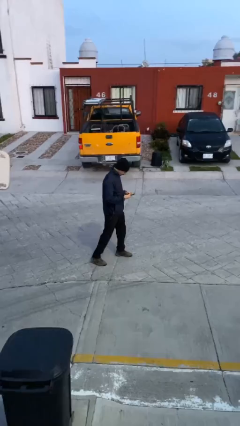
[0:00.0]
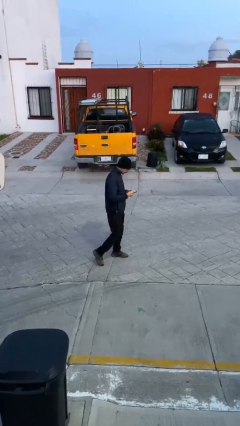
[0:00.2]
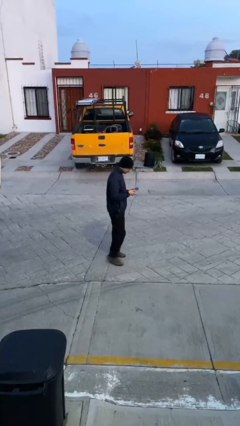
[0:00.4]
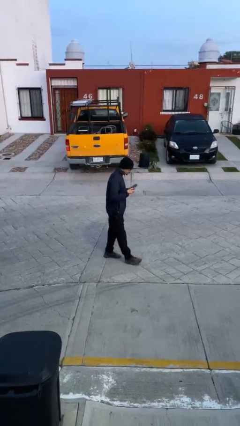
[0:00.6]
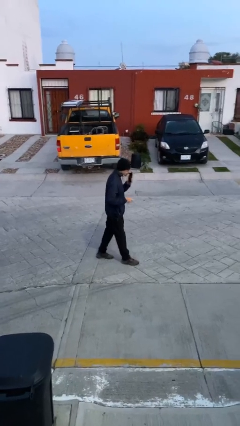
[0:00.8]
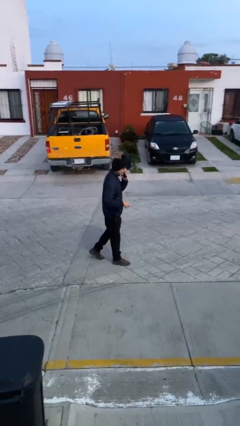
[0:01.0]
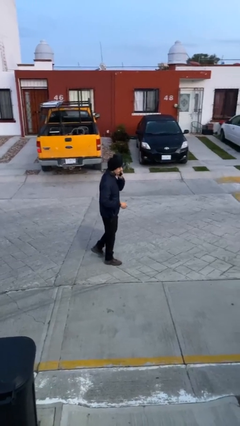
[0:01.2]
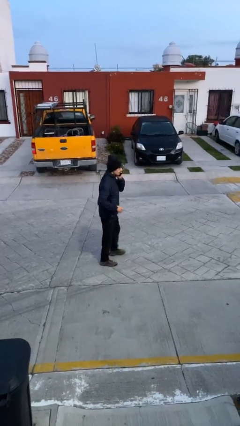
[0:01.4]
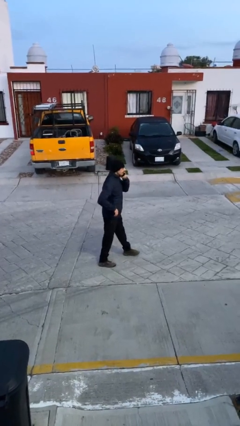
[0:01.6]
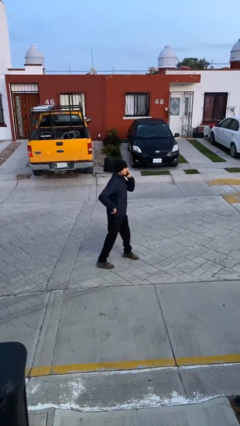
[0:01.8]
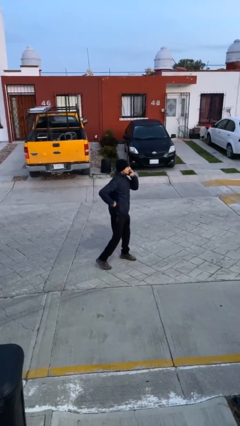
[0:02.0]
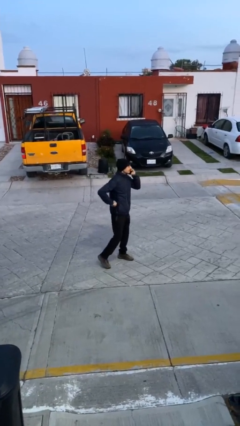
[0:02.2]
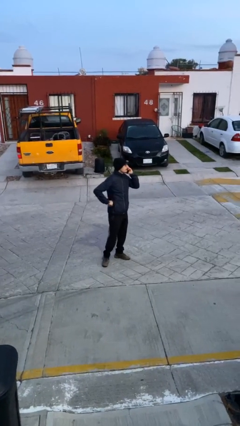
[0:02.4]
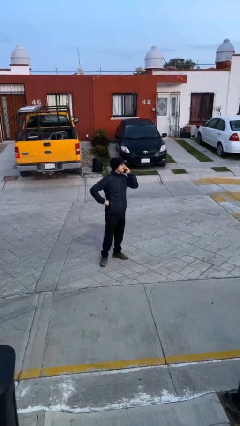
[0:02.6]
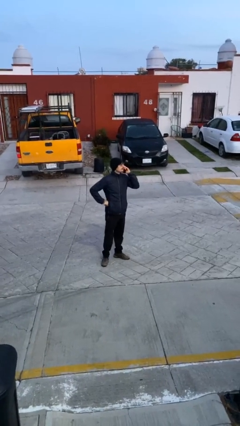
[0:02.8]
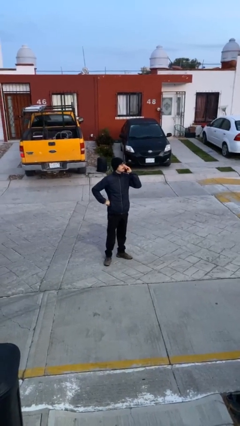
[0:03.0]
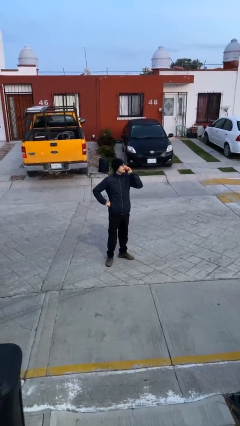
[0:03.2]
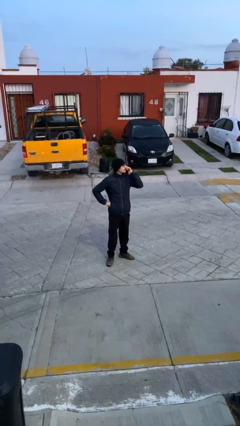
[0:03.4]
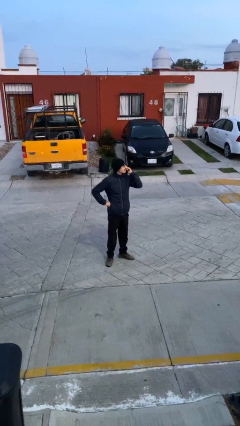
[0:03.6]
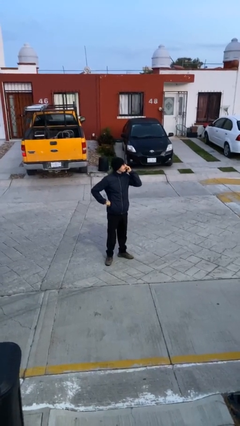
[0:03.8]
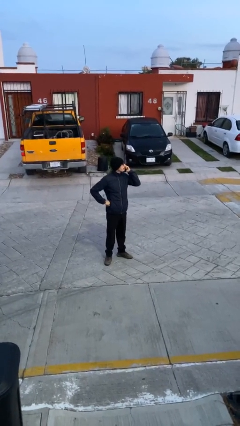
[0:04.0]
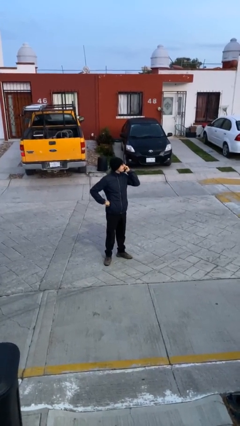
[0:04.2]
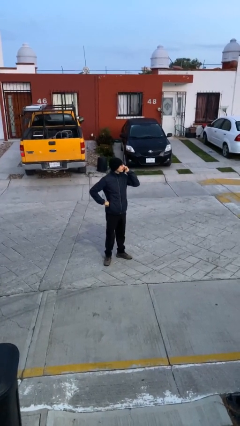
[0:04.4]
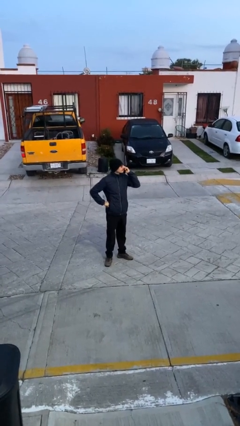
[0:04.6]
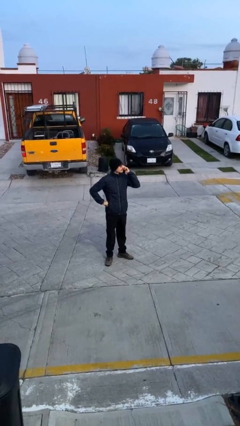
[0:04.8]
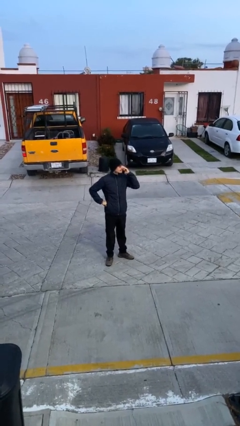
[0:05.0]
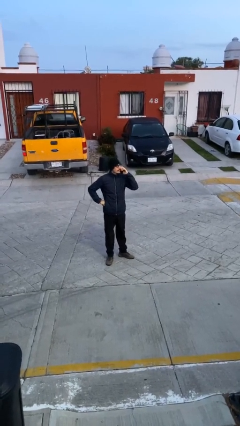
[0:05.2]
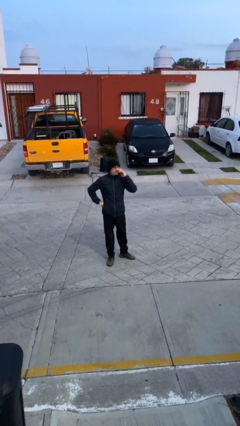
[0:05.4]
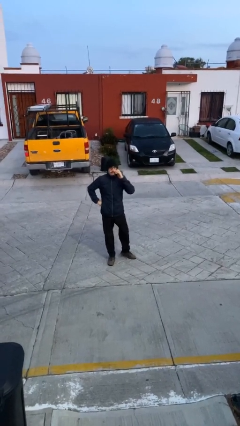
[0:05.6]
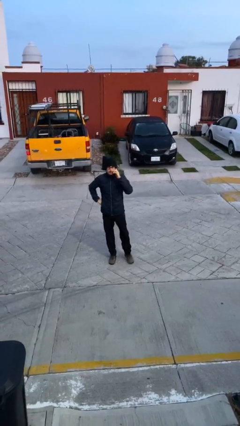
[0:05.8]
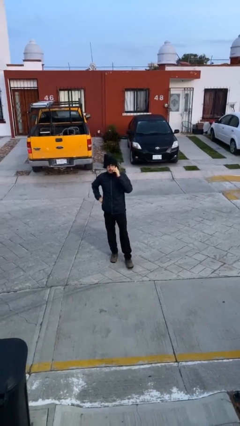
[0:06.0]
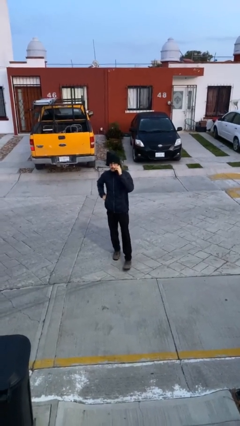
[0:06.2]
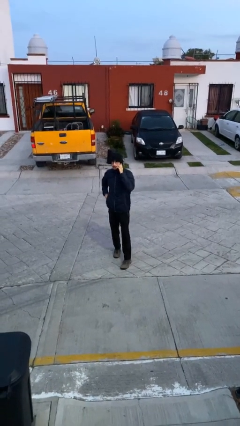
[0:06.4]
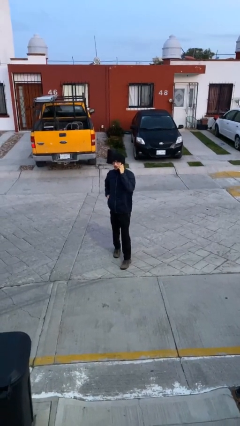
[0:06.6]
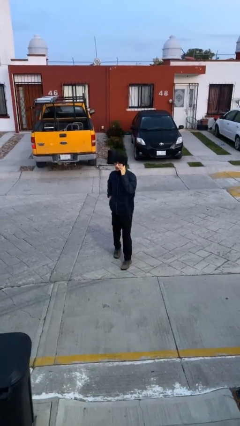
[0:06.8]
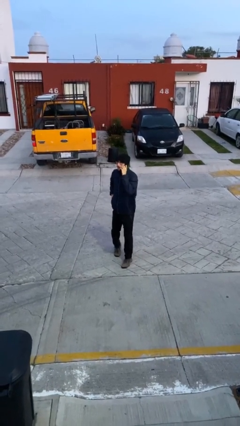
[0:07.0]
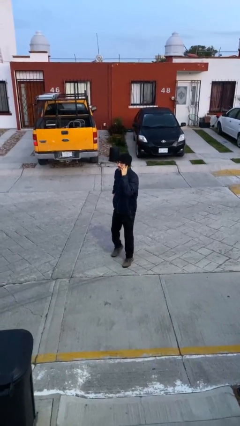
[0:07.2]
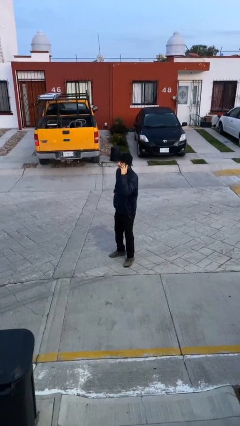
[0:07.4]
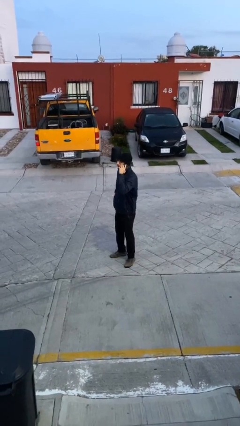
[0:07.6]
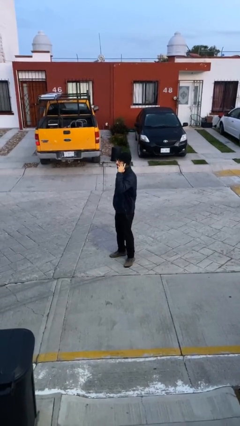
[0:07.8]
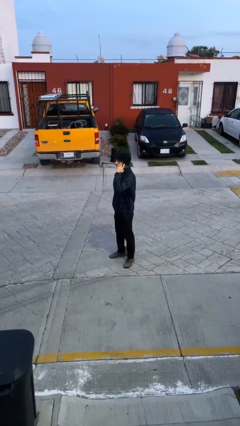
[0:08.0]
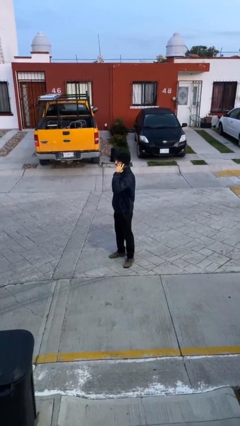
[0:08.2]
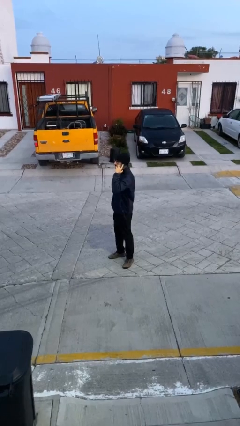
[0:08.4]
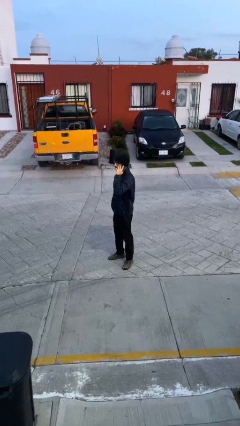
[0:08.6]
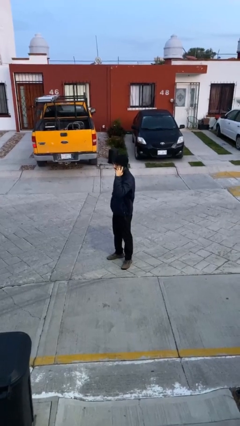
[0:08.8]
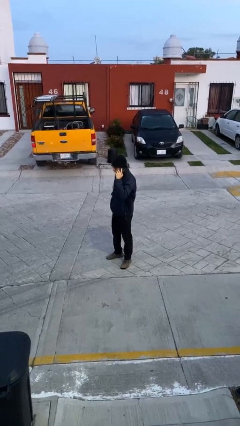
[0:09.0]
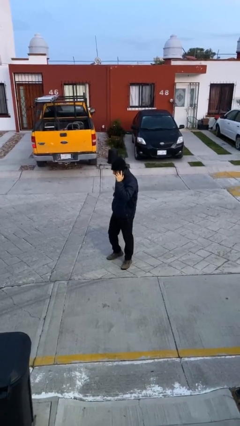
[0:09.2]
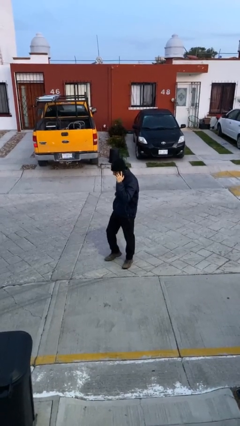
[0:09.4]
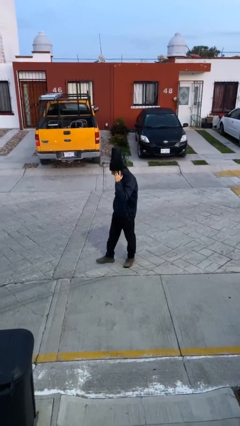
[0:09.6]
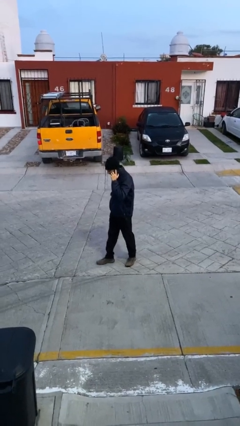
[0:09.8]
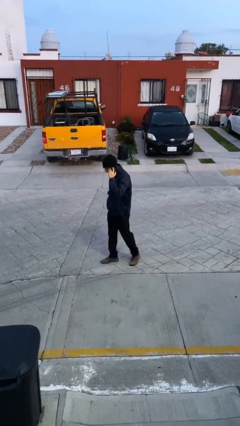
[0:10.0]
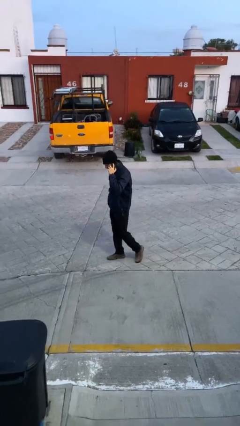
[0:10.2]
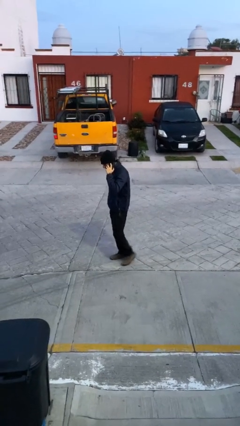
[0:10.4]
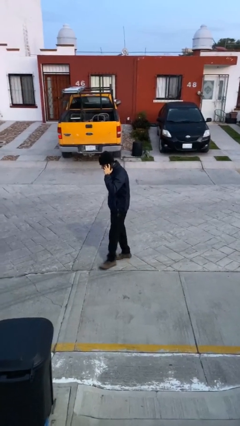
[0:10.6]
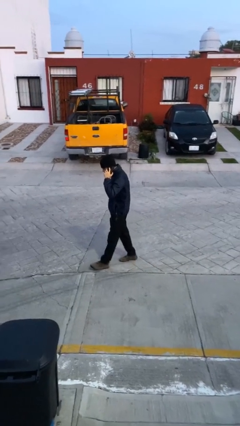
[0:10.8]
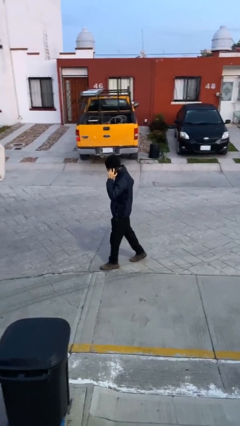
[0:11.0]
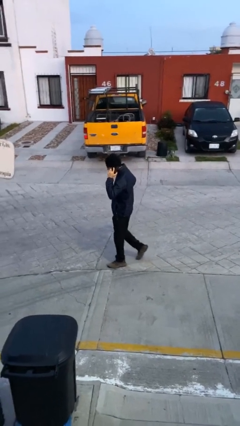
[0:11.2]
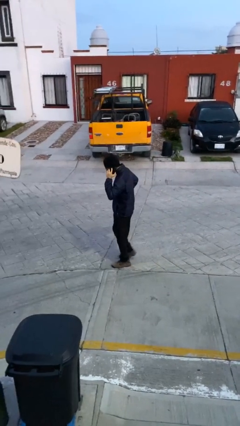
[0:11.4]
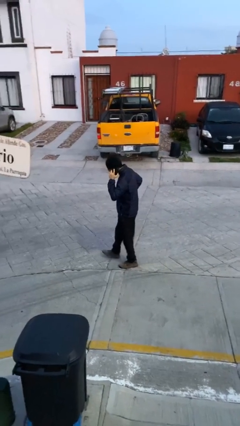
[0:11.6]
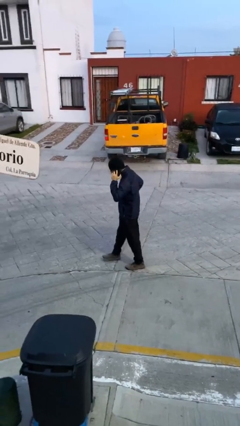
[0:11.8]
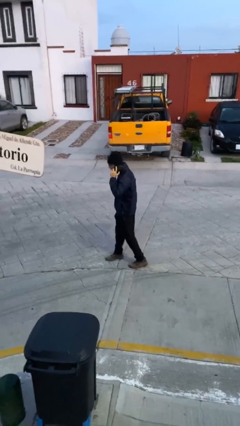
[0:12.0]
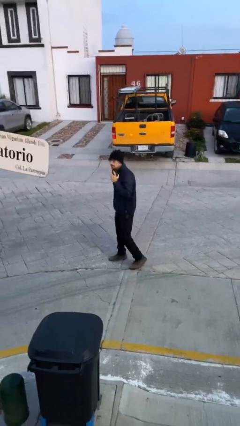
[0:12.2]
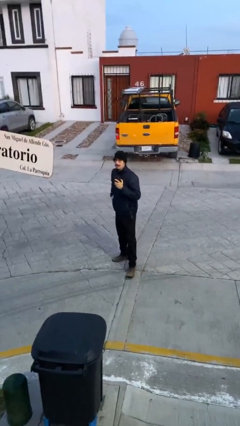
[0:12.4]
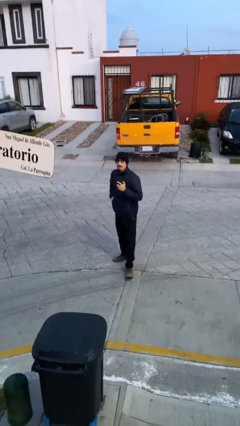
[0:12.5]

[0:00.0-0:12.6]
person talks on phone

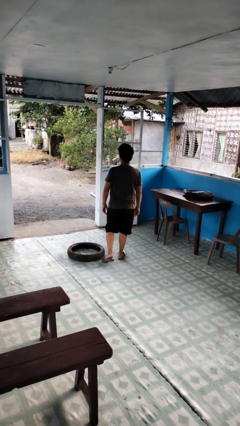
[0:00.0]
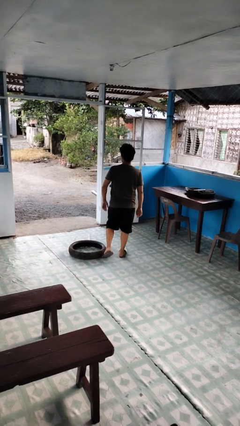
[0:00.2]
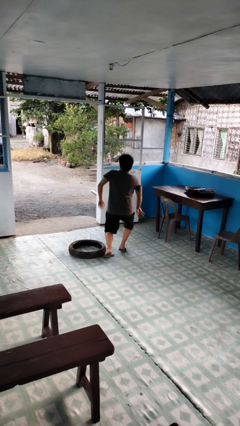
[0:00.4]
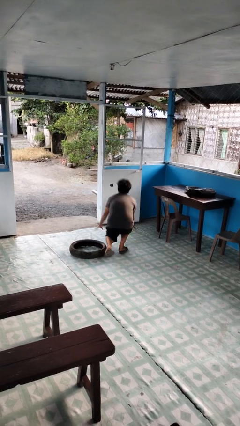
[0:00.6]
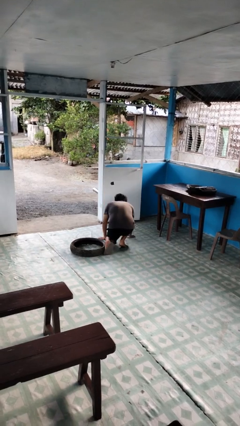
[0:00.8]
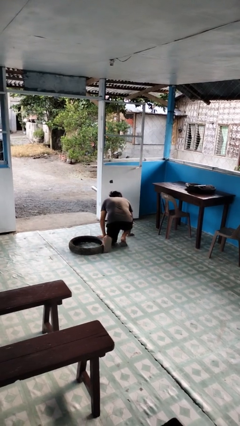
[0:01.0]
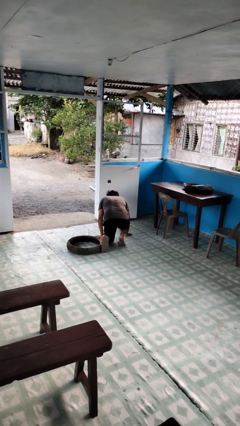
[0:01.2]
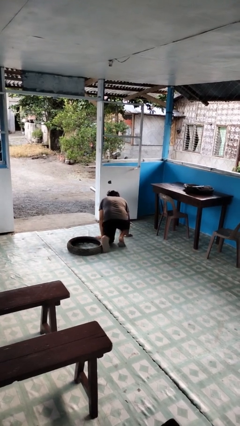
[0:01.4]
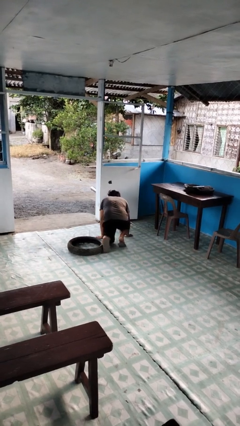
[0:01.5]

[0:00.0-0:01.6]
person trips on object on floor

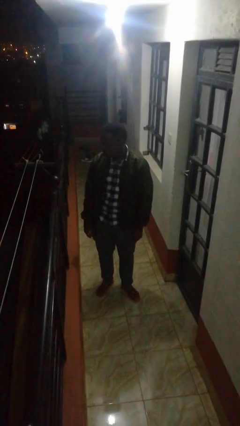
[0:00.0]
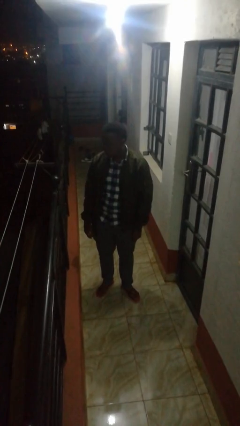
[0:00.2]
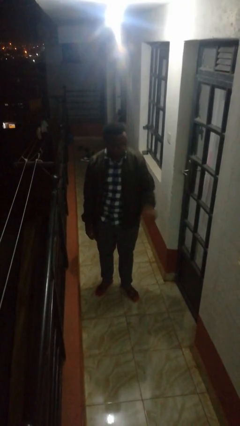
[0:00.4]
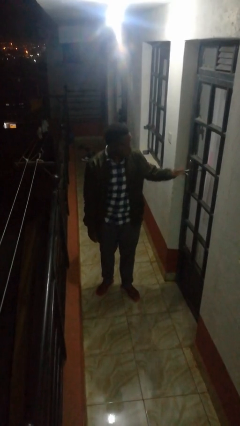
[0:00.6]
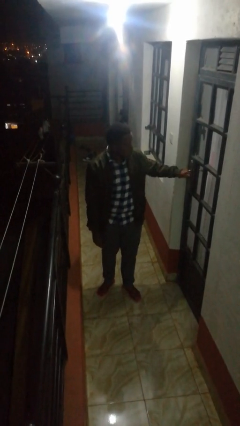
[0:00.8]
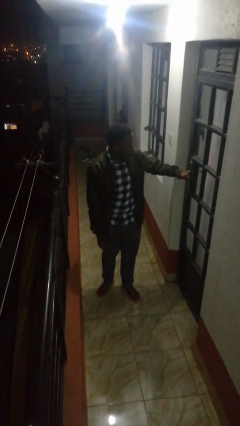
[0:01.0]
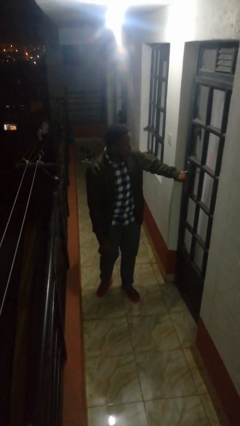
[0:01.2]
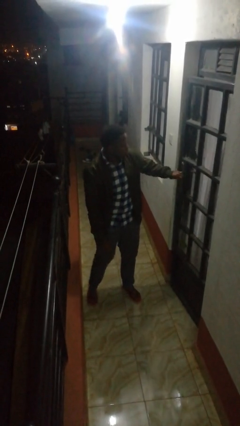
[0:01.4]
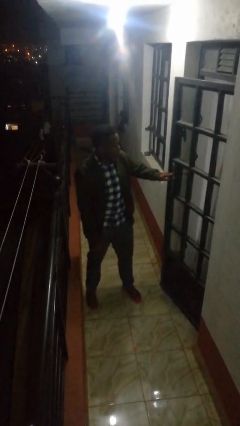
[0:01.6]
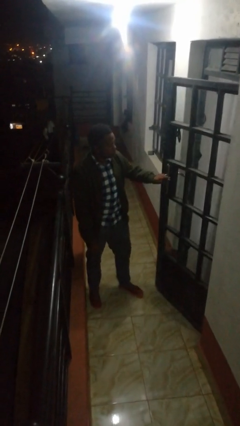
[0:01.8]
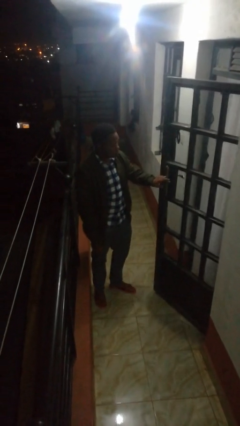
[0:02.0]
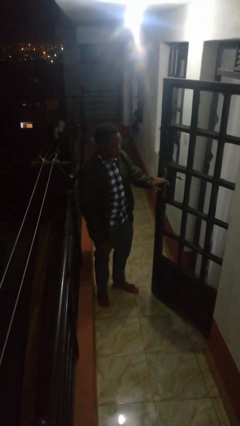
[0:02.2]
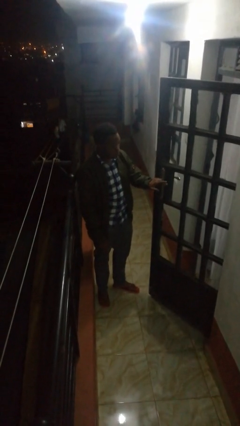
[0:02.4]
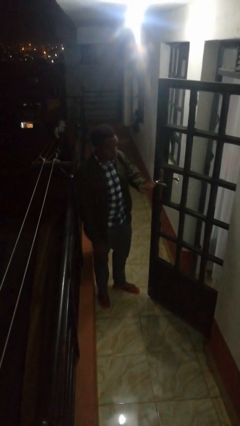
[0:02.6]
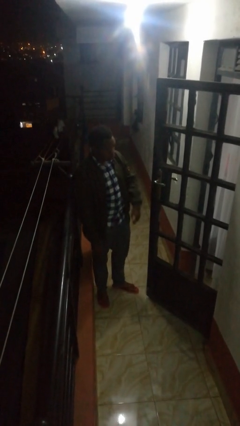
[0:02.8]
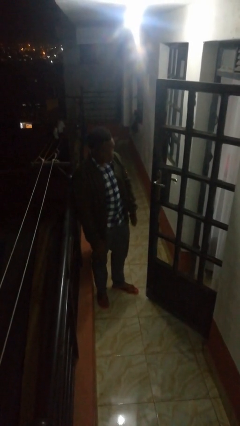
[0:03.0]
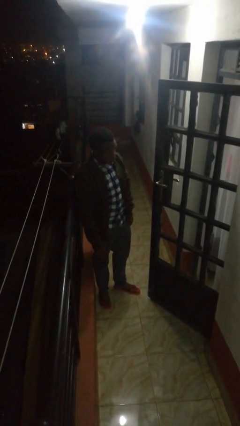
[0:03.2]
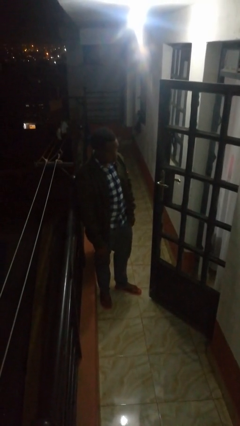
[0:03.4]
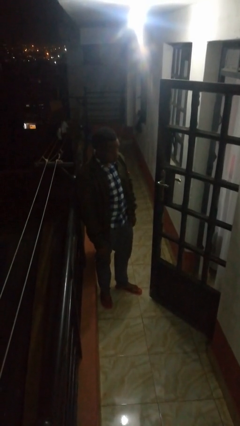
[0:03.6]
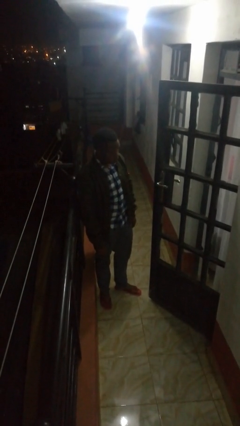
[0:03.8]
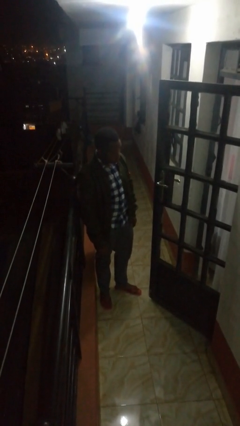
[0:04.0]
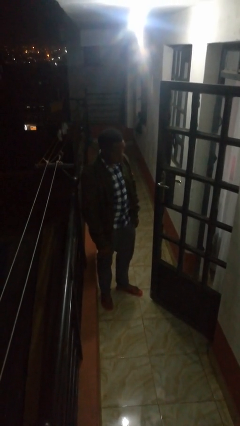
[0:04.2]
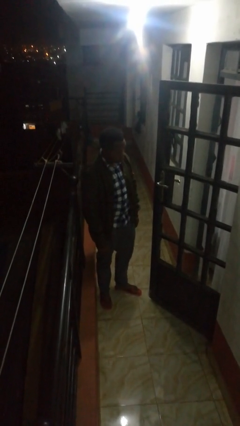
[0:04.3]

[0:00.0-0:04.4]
person opens facility door
